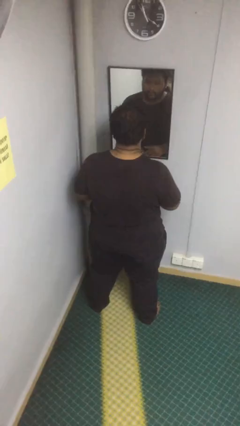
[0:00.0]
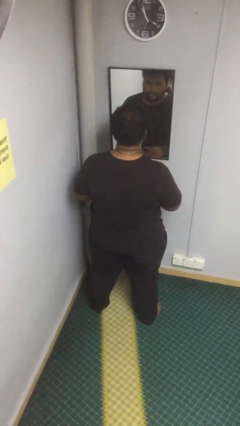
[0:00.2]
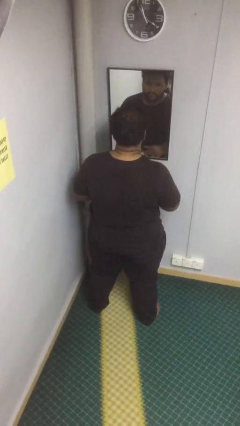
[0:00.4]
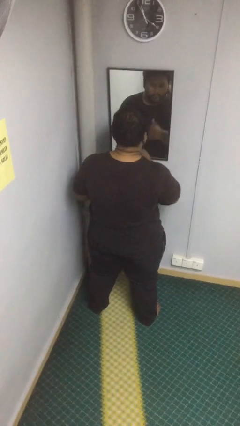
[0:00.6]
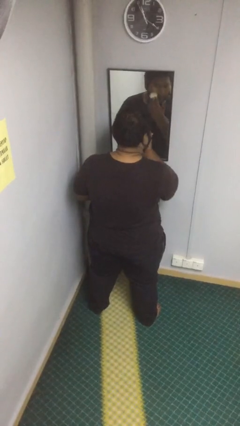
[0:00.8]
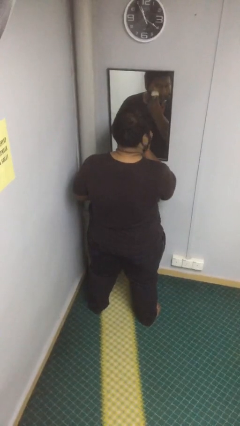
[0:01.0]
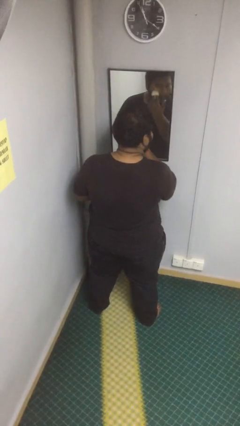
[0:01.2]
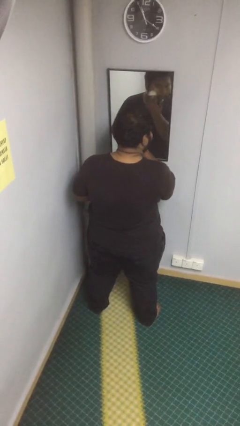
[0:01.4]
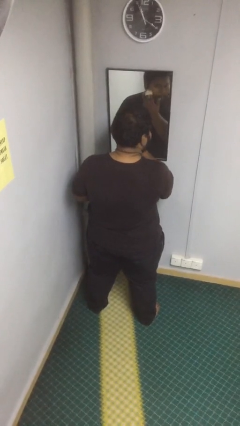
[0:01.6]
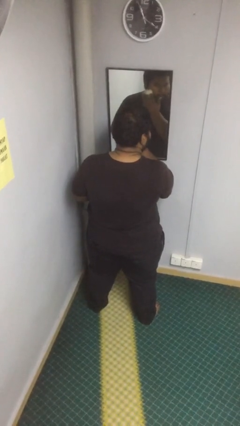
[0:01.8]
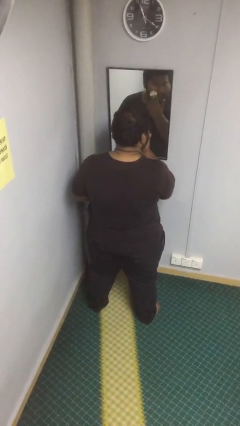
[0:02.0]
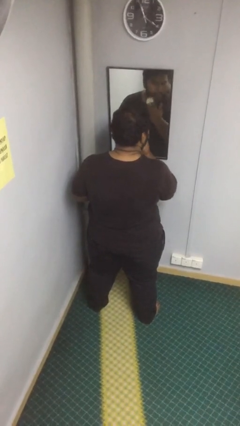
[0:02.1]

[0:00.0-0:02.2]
person applies foundation makeup

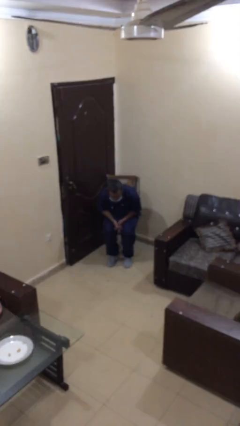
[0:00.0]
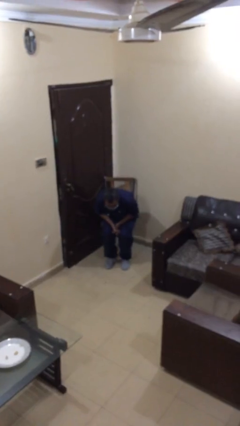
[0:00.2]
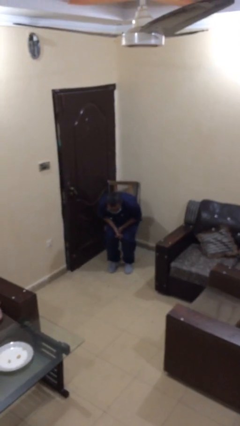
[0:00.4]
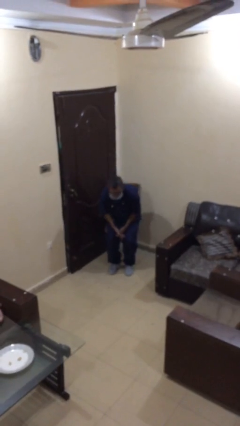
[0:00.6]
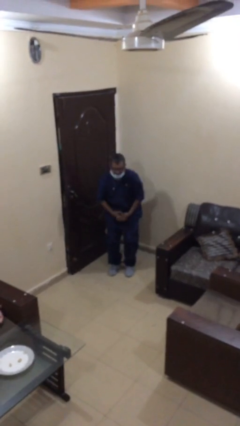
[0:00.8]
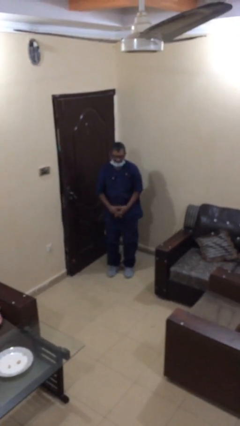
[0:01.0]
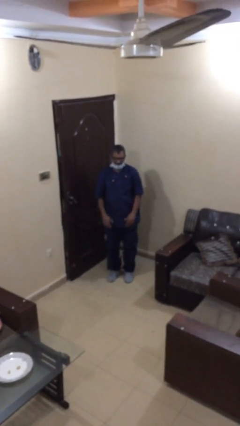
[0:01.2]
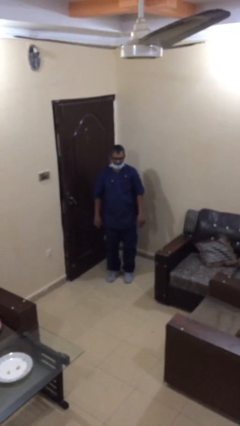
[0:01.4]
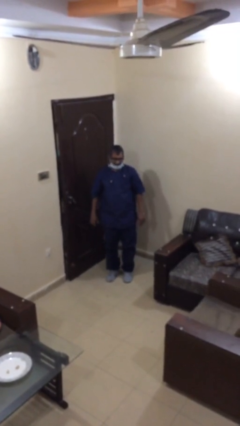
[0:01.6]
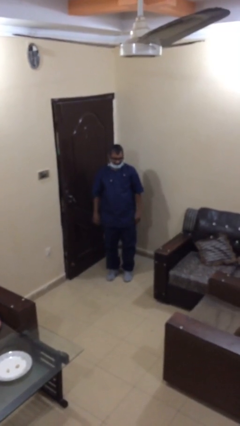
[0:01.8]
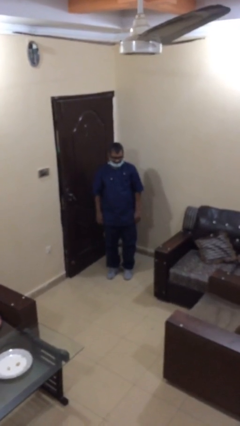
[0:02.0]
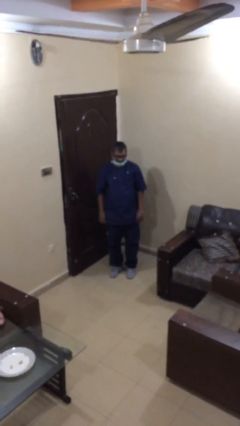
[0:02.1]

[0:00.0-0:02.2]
person stands up

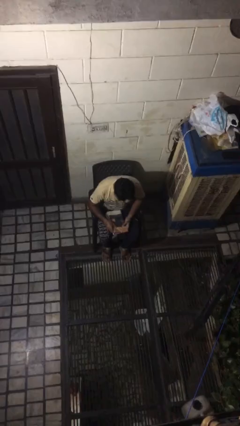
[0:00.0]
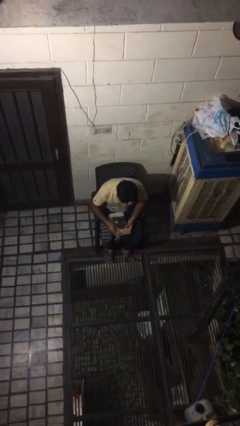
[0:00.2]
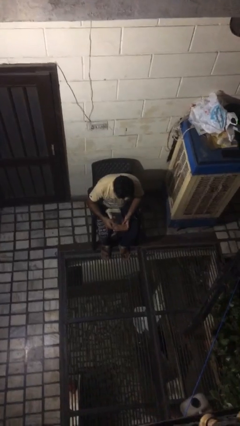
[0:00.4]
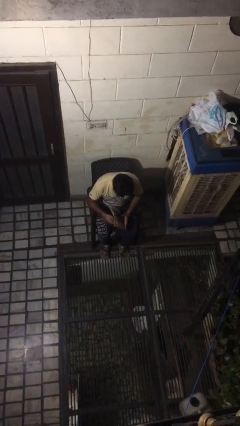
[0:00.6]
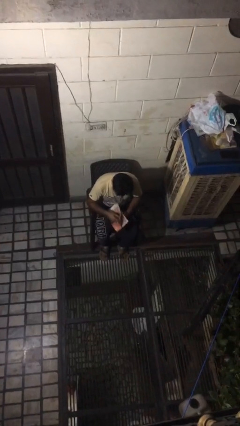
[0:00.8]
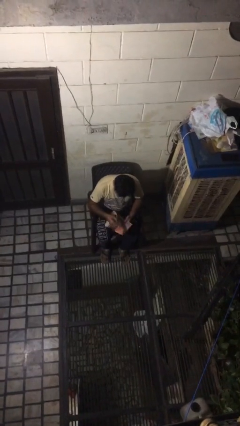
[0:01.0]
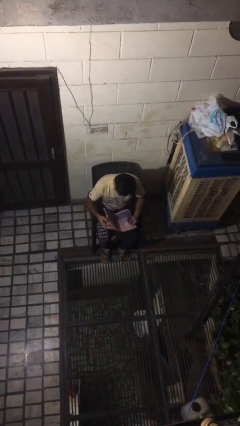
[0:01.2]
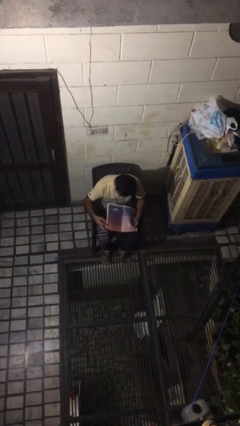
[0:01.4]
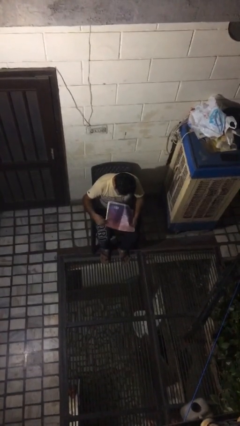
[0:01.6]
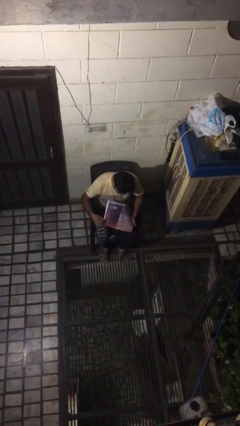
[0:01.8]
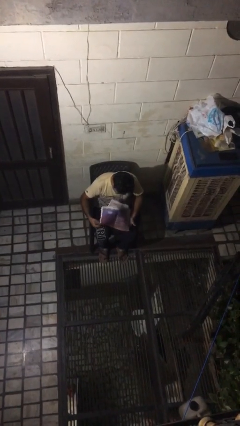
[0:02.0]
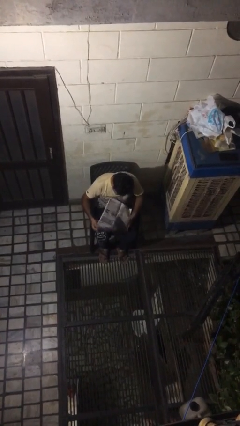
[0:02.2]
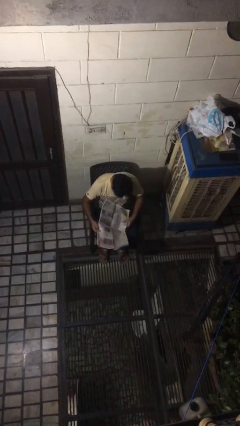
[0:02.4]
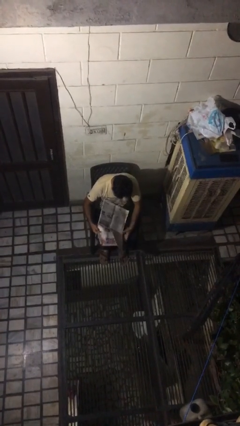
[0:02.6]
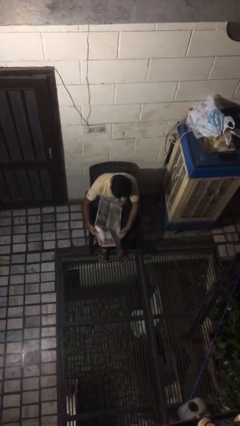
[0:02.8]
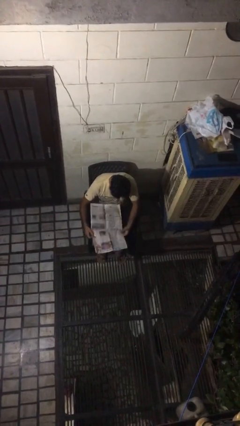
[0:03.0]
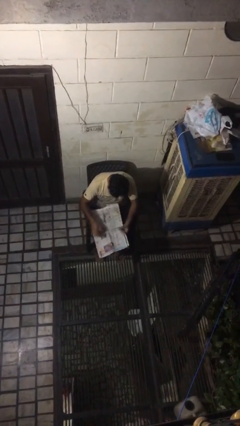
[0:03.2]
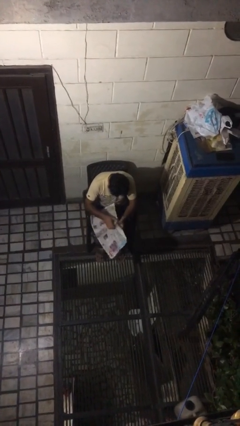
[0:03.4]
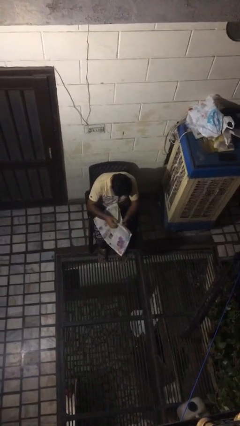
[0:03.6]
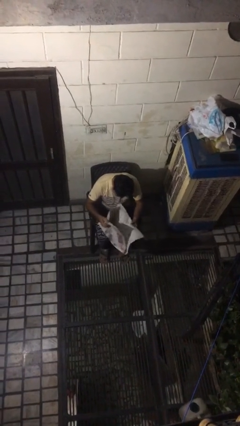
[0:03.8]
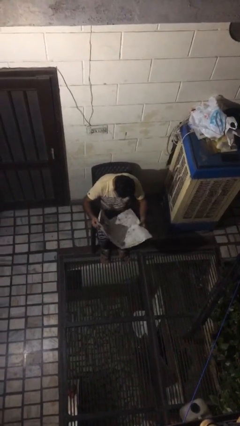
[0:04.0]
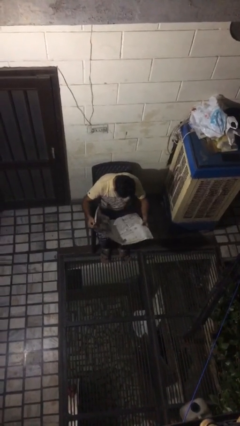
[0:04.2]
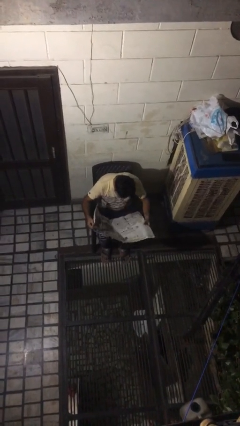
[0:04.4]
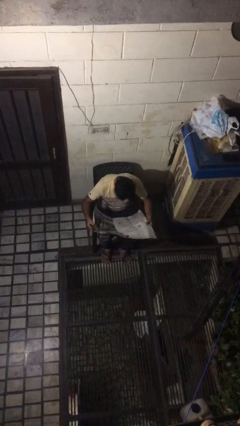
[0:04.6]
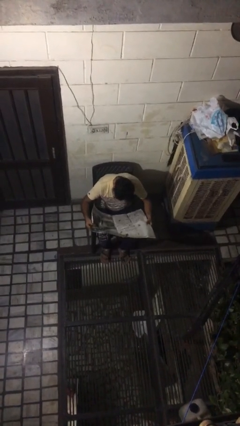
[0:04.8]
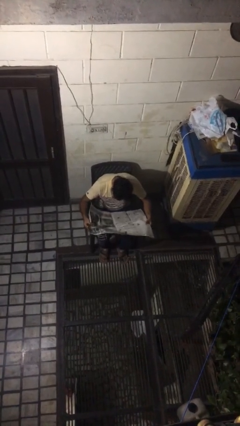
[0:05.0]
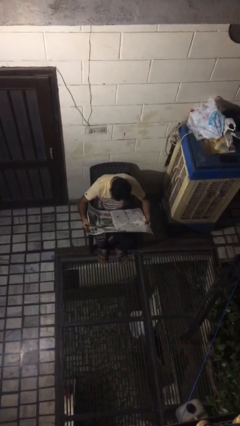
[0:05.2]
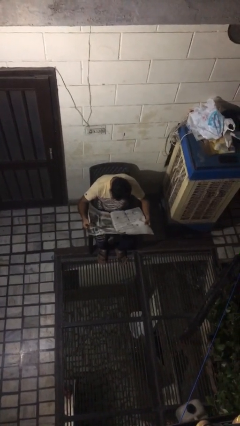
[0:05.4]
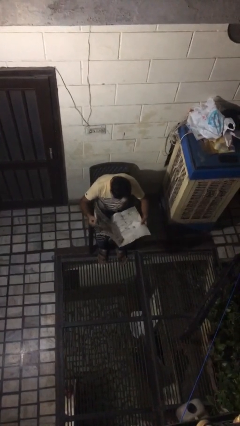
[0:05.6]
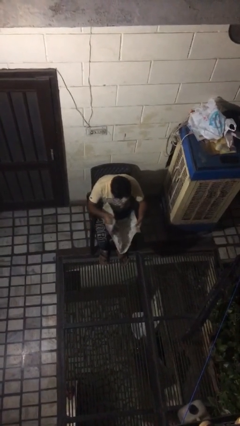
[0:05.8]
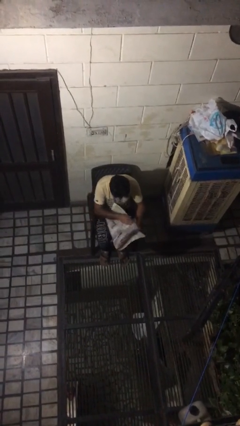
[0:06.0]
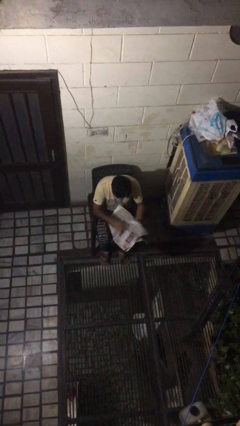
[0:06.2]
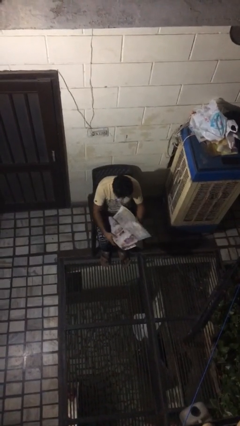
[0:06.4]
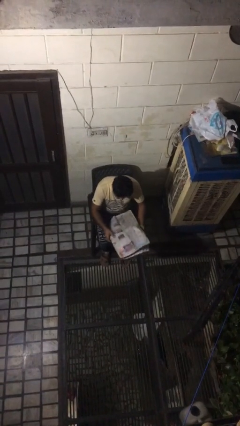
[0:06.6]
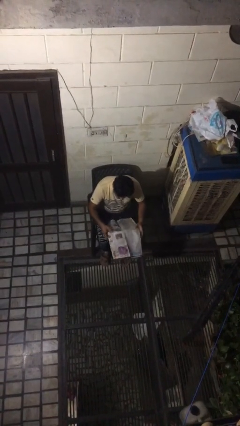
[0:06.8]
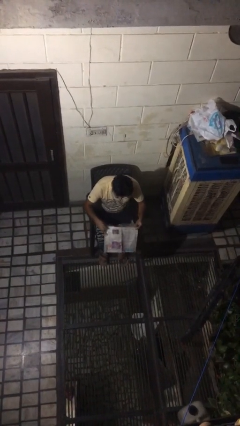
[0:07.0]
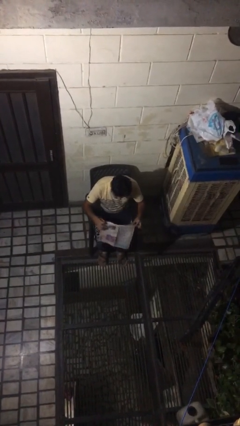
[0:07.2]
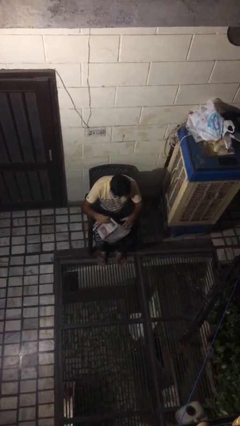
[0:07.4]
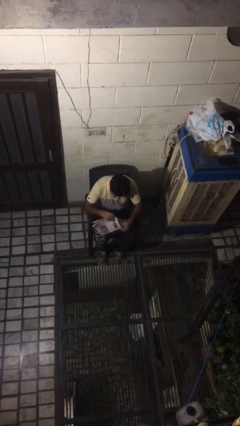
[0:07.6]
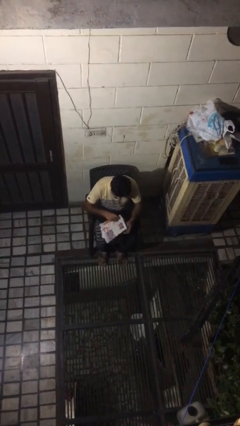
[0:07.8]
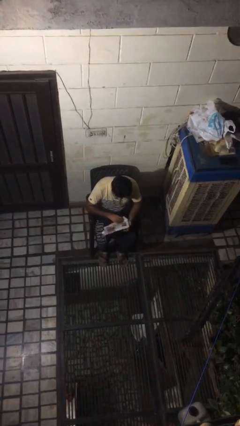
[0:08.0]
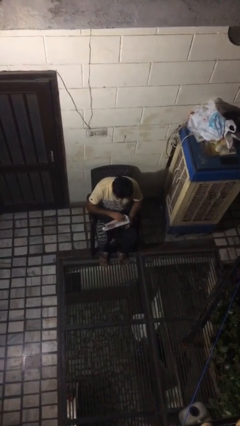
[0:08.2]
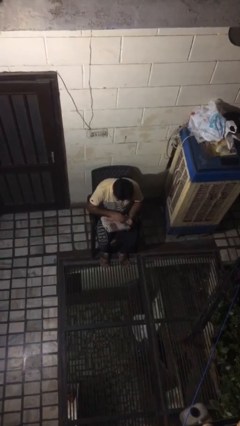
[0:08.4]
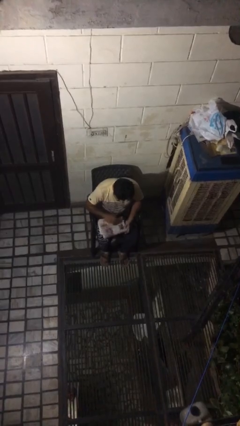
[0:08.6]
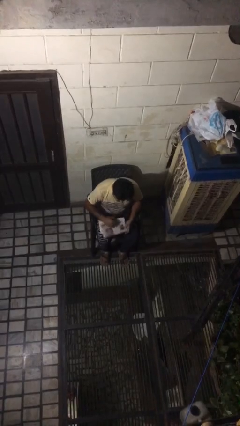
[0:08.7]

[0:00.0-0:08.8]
person reads newspaper

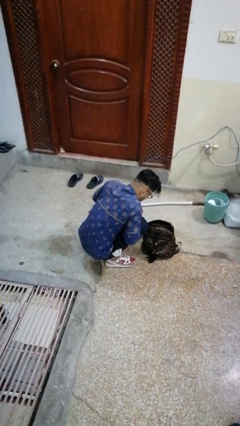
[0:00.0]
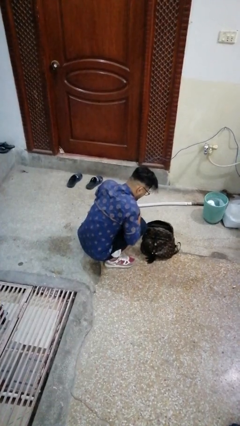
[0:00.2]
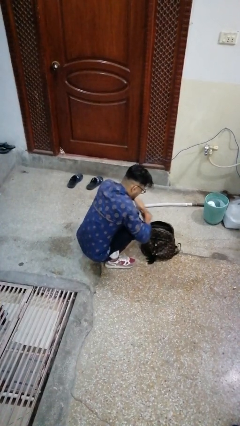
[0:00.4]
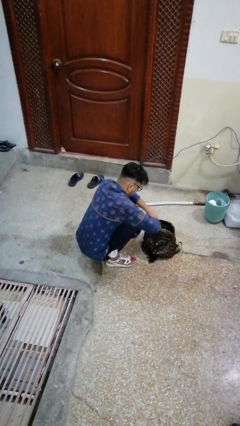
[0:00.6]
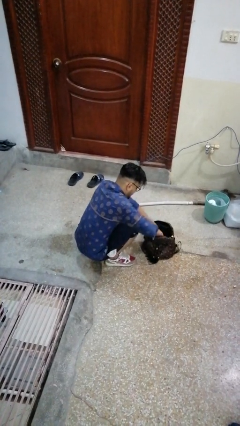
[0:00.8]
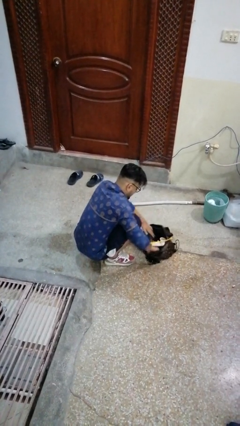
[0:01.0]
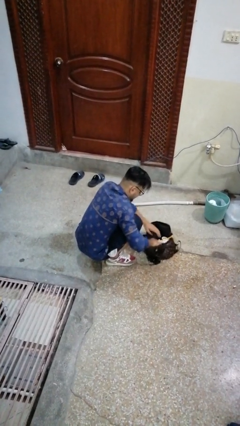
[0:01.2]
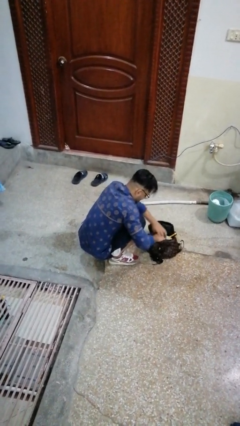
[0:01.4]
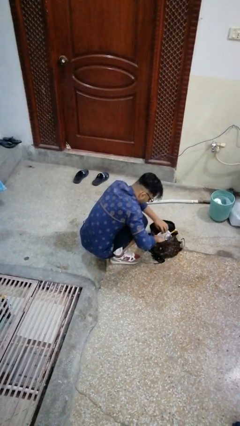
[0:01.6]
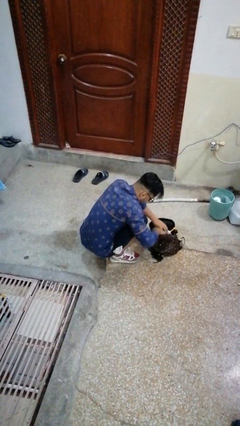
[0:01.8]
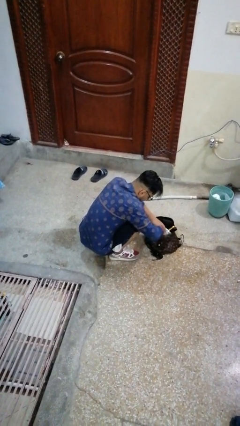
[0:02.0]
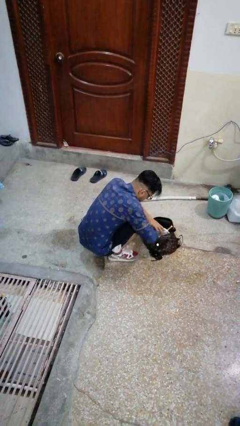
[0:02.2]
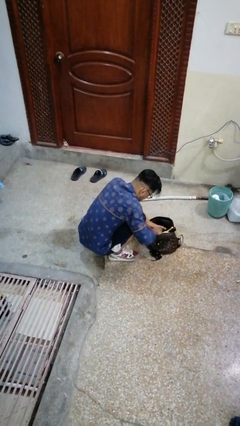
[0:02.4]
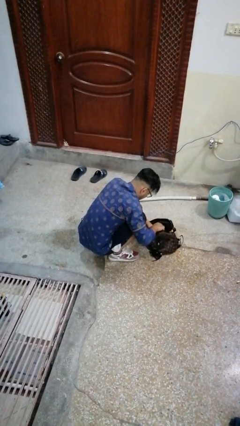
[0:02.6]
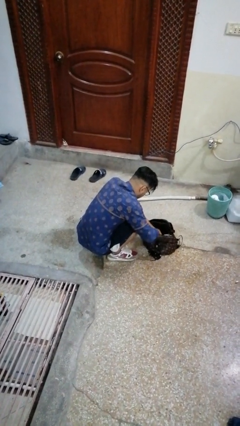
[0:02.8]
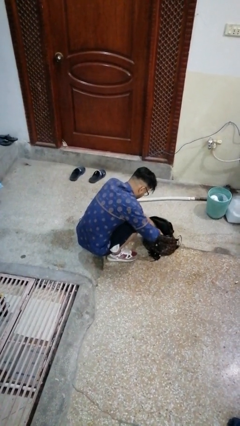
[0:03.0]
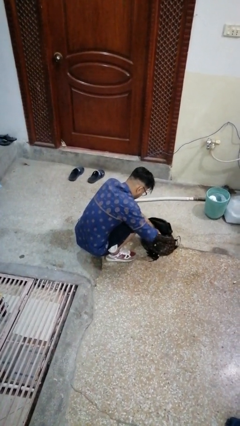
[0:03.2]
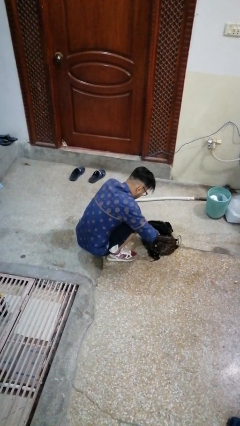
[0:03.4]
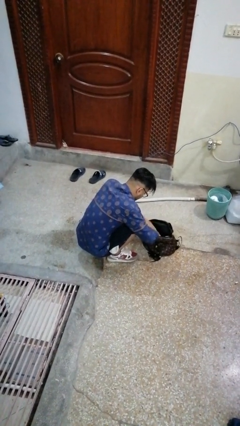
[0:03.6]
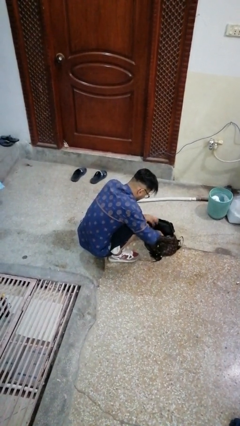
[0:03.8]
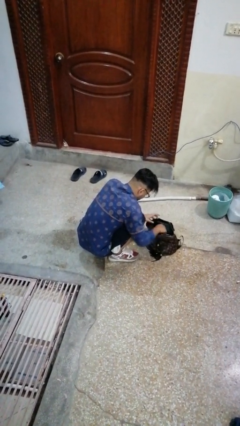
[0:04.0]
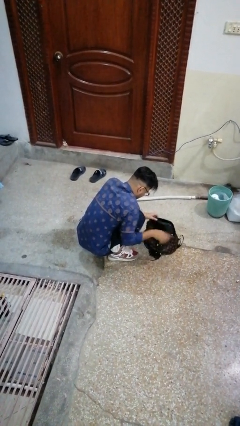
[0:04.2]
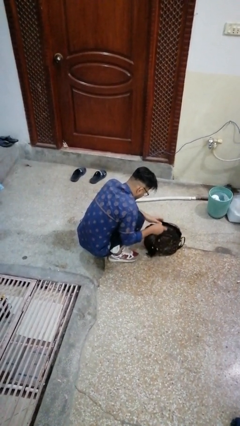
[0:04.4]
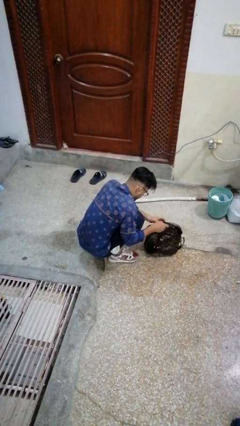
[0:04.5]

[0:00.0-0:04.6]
person searches in bag

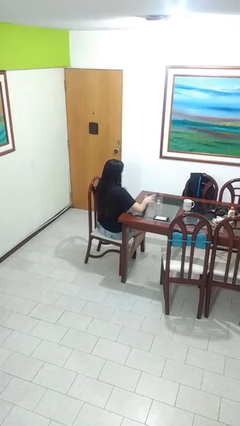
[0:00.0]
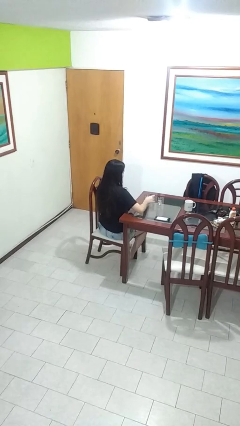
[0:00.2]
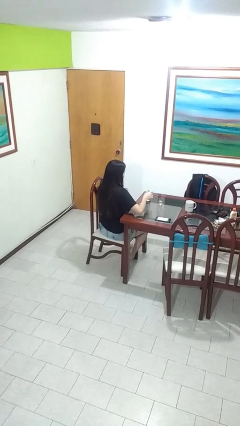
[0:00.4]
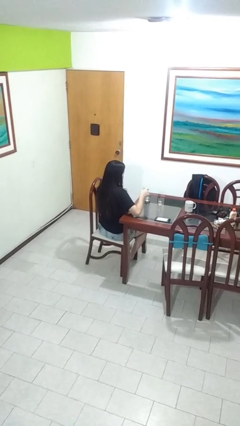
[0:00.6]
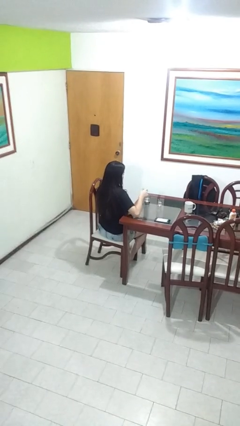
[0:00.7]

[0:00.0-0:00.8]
person picks up object from table
